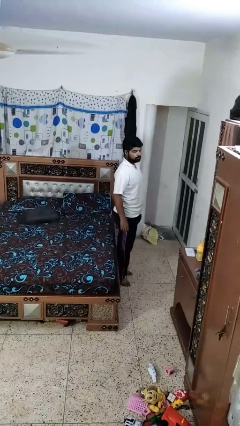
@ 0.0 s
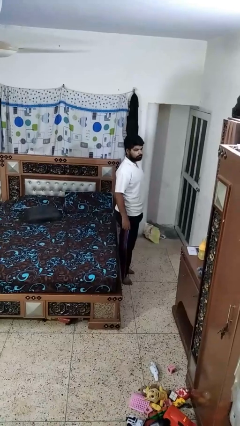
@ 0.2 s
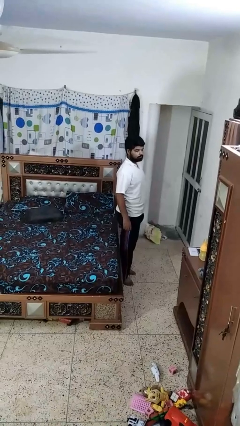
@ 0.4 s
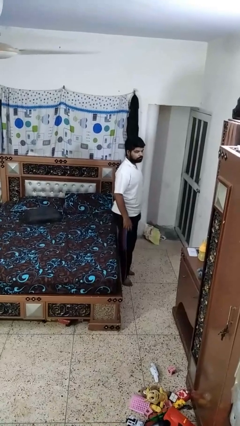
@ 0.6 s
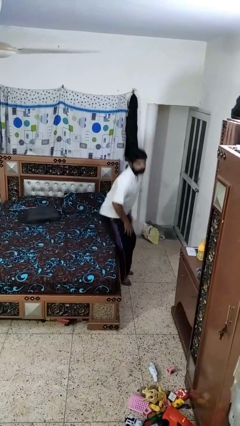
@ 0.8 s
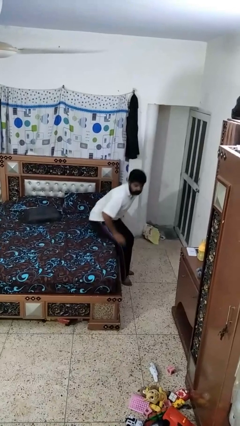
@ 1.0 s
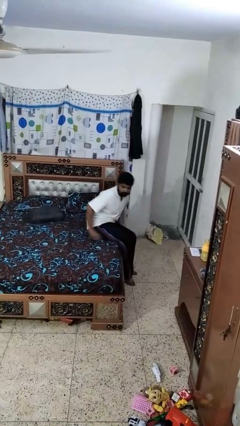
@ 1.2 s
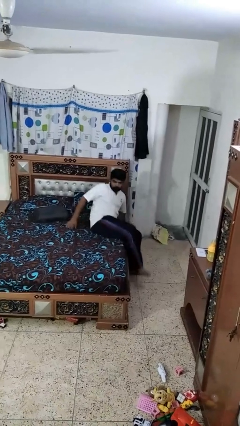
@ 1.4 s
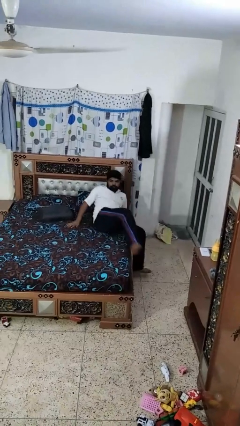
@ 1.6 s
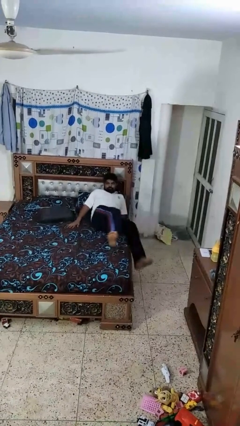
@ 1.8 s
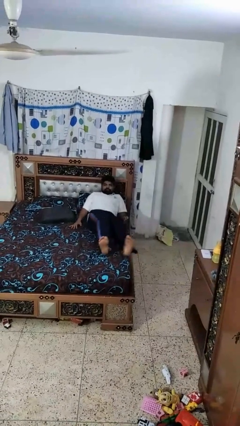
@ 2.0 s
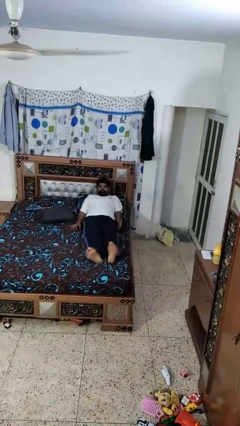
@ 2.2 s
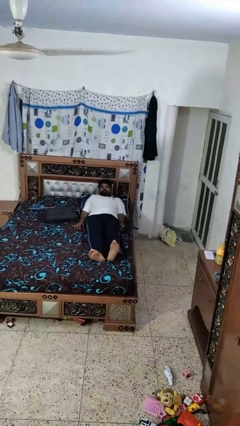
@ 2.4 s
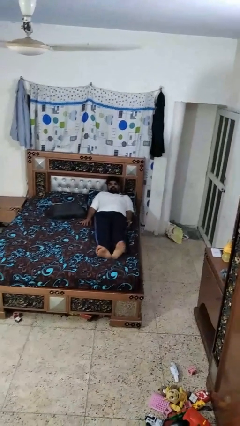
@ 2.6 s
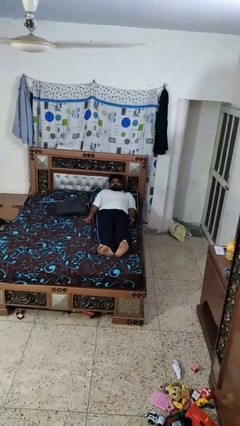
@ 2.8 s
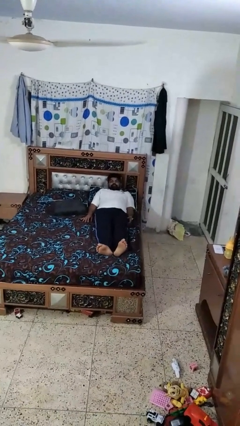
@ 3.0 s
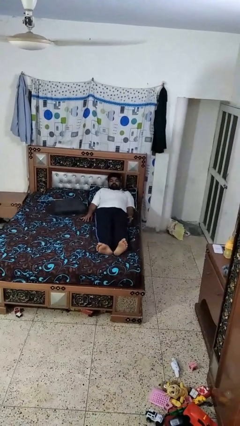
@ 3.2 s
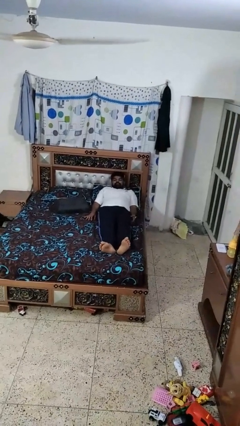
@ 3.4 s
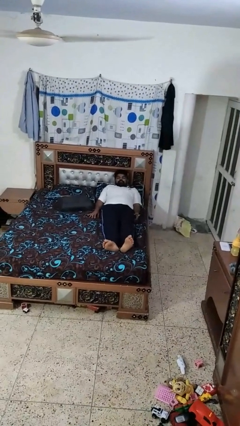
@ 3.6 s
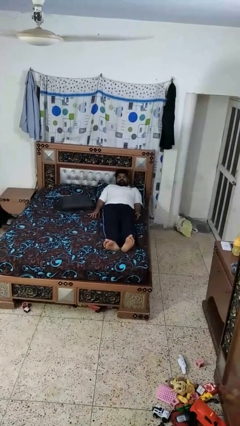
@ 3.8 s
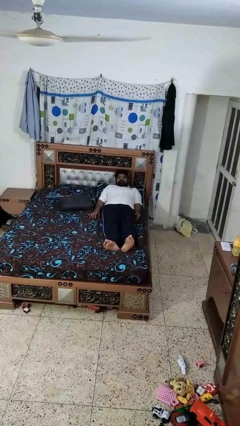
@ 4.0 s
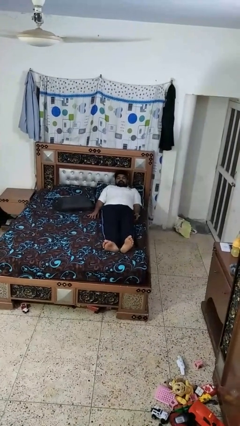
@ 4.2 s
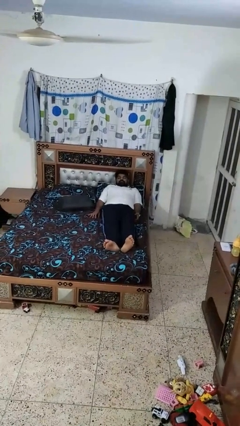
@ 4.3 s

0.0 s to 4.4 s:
person lies down on bed

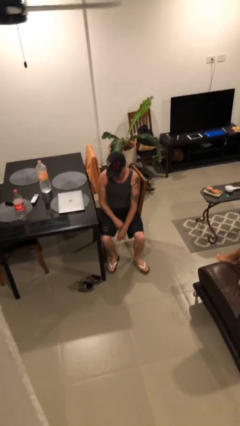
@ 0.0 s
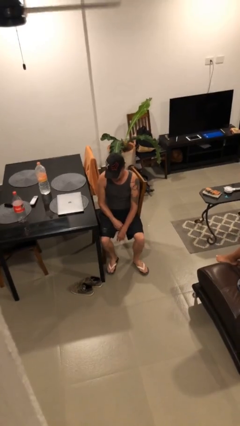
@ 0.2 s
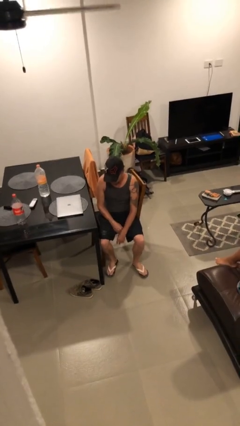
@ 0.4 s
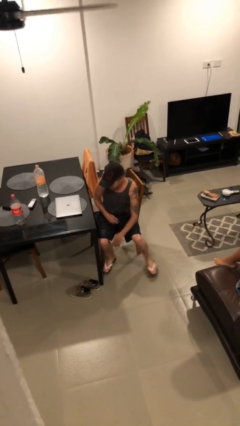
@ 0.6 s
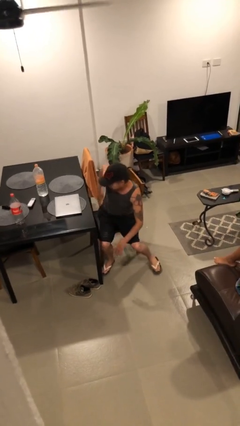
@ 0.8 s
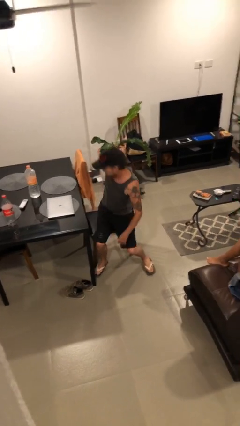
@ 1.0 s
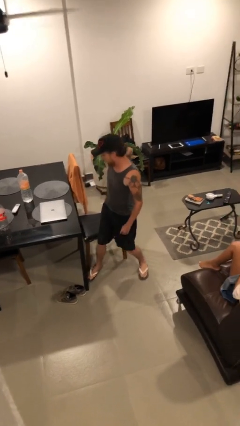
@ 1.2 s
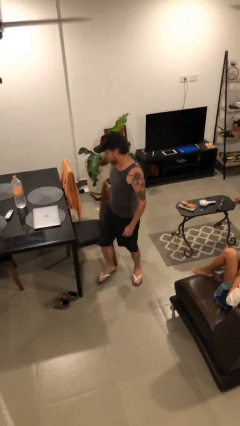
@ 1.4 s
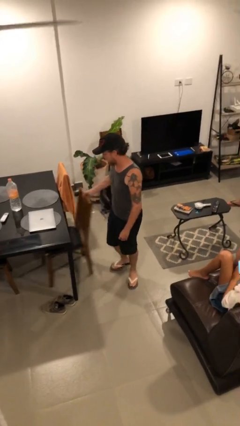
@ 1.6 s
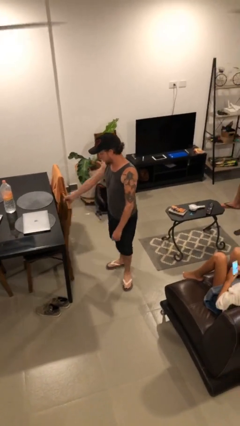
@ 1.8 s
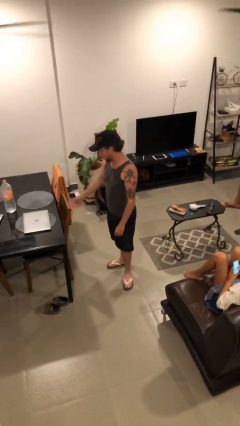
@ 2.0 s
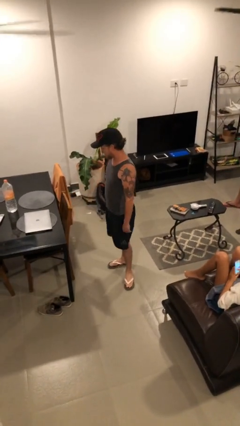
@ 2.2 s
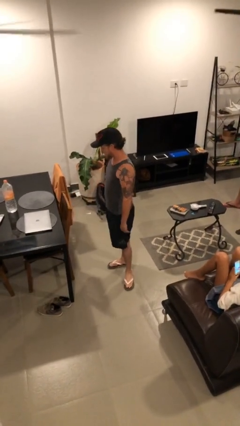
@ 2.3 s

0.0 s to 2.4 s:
person stands up

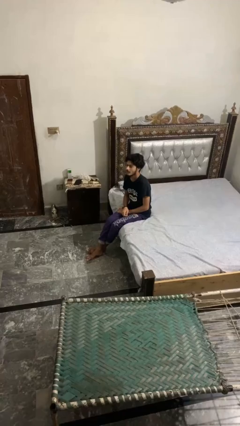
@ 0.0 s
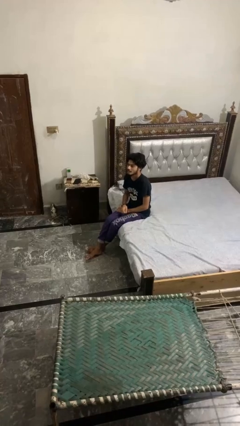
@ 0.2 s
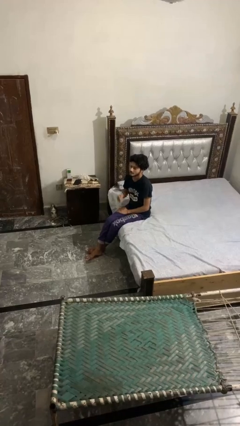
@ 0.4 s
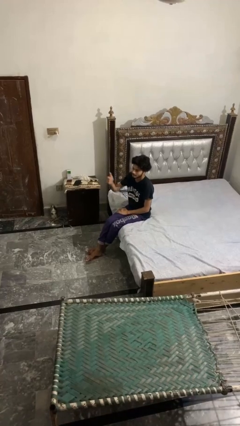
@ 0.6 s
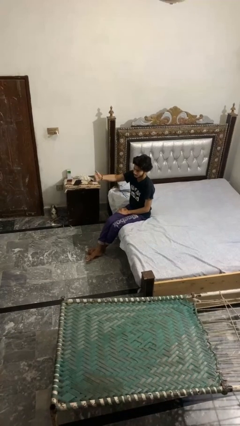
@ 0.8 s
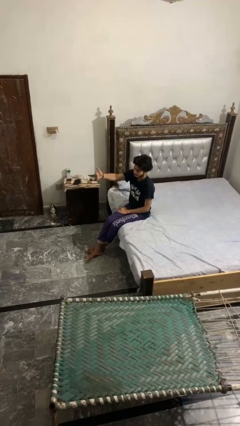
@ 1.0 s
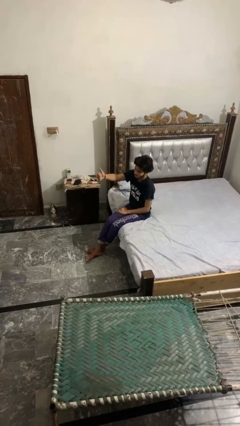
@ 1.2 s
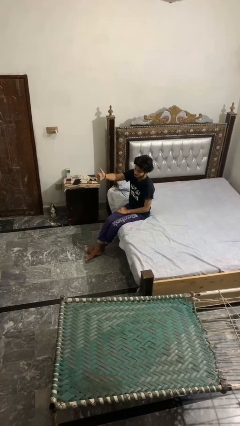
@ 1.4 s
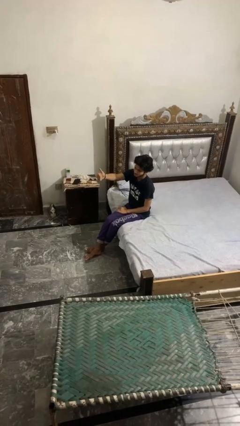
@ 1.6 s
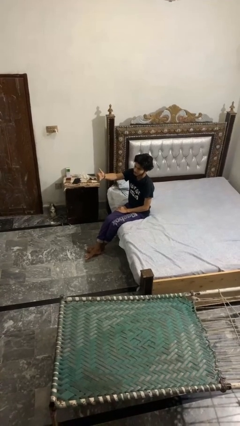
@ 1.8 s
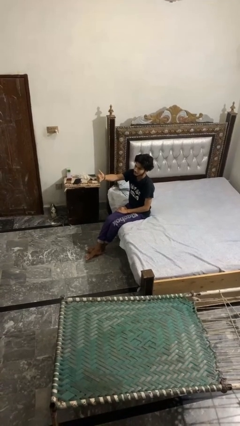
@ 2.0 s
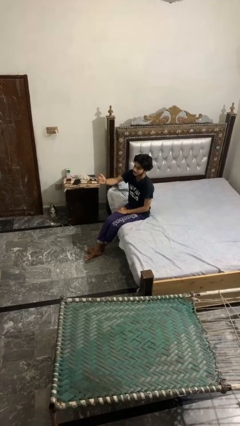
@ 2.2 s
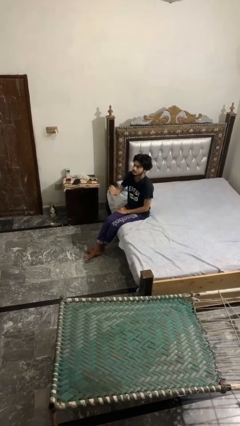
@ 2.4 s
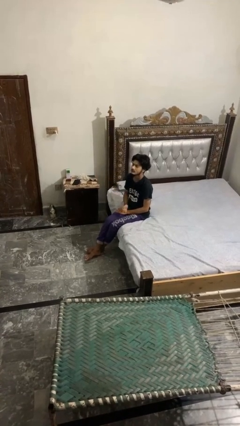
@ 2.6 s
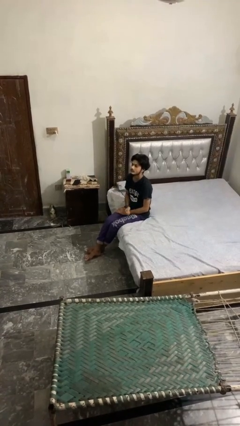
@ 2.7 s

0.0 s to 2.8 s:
person gestures thumbs up

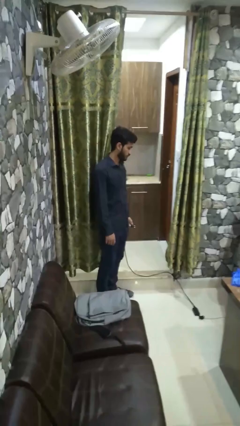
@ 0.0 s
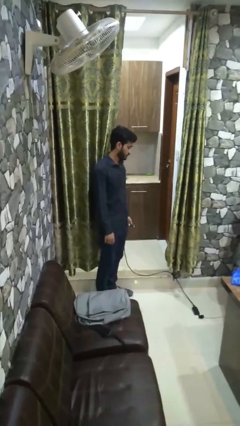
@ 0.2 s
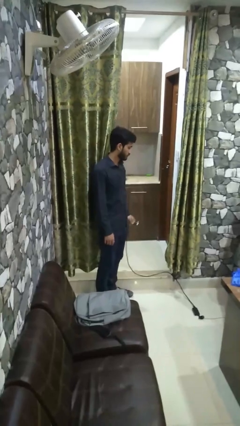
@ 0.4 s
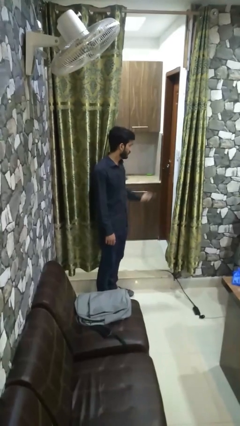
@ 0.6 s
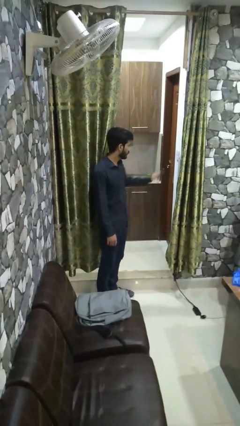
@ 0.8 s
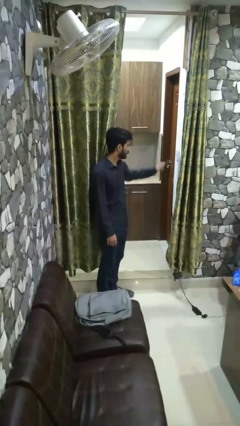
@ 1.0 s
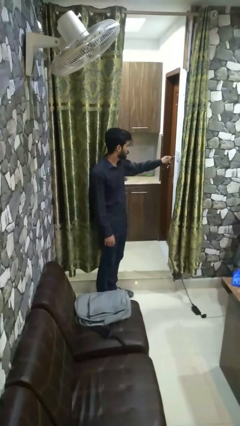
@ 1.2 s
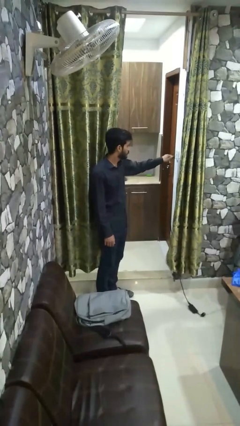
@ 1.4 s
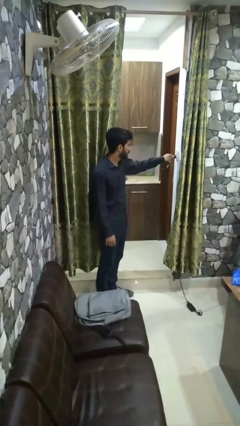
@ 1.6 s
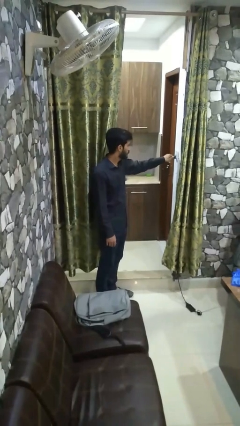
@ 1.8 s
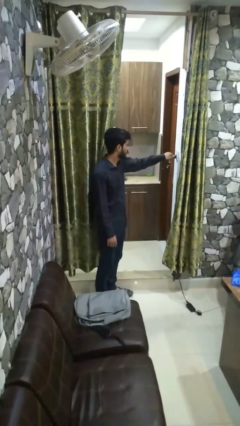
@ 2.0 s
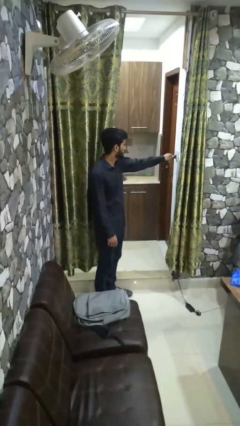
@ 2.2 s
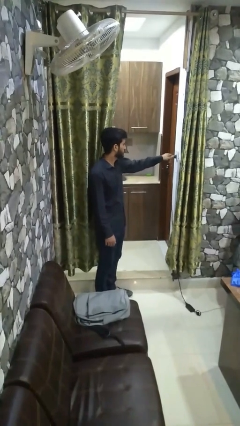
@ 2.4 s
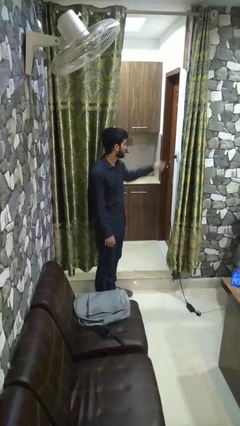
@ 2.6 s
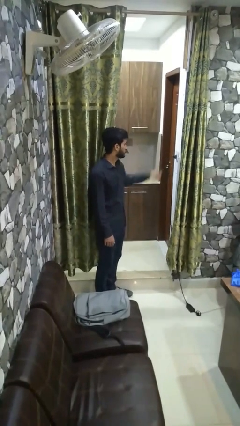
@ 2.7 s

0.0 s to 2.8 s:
person plugs into electrical socket

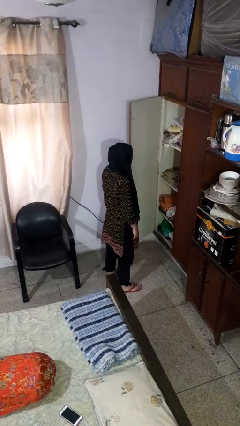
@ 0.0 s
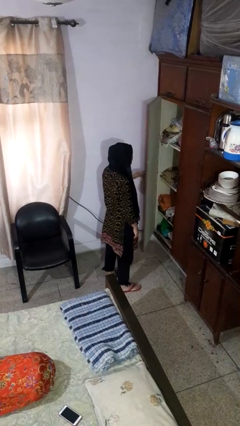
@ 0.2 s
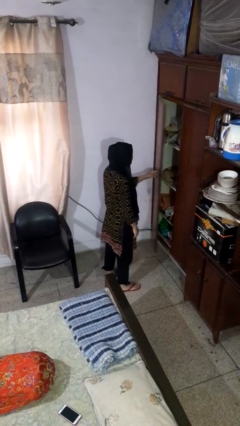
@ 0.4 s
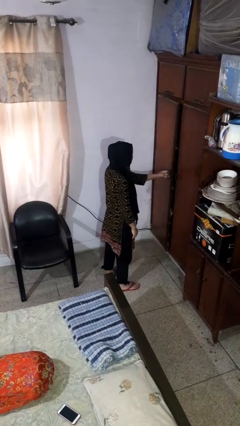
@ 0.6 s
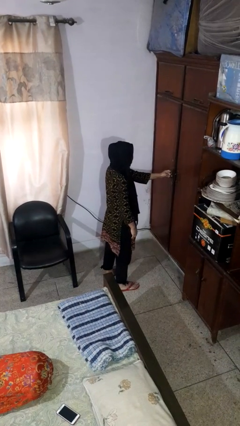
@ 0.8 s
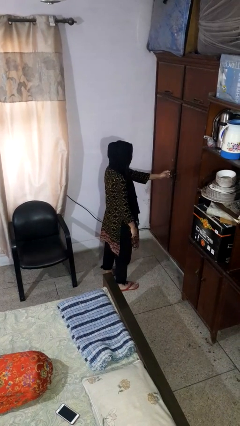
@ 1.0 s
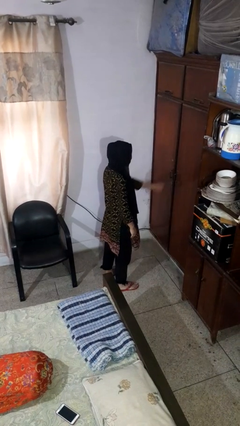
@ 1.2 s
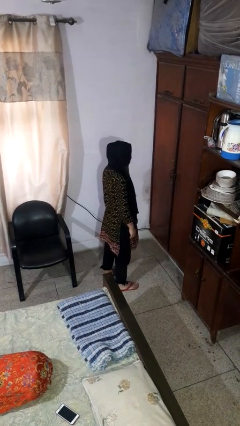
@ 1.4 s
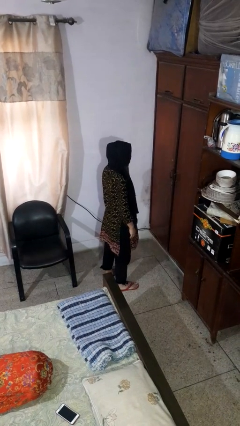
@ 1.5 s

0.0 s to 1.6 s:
person closes closet door

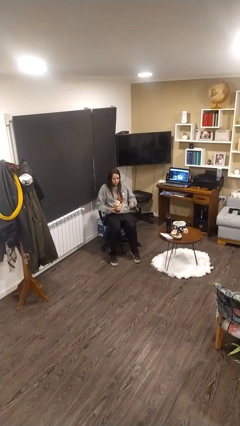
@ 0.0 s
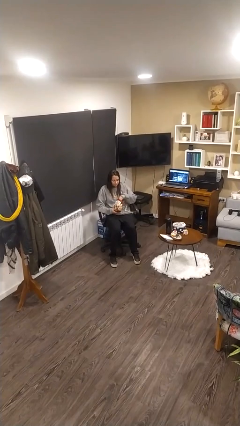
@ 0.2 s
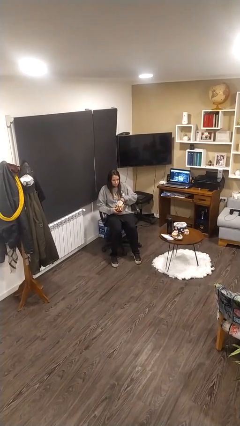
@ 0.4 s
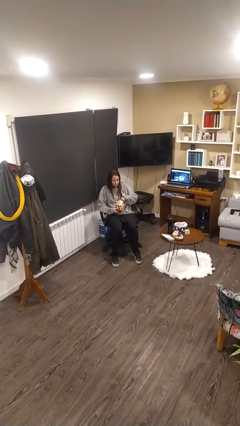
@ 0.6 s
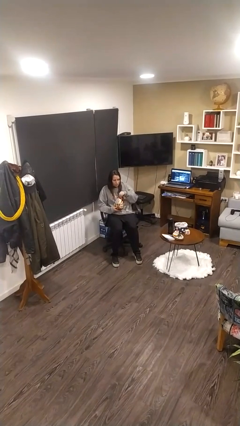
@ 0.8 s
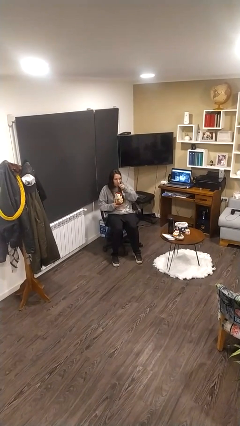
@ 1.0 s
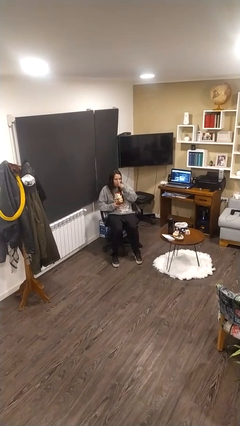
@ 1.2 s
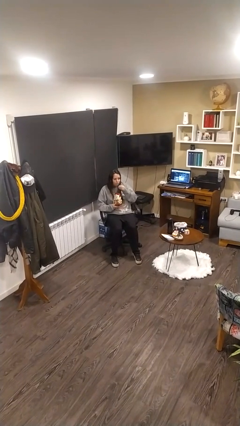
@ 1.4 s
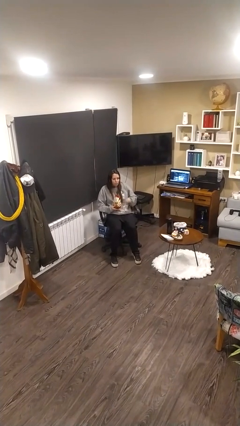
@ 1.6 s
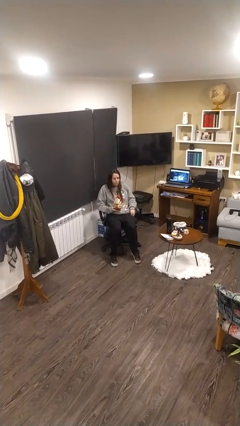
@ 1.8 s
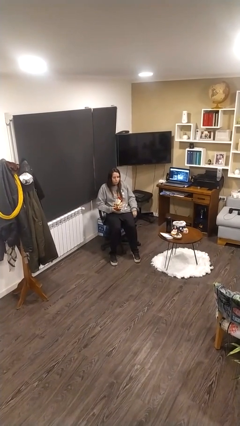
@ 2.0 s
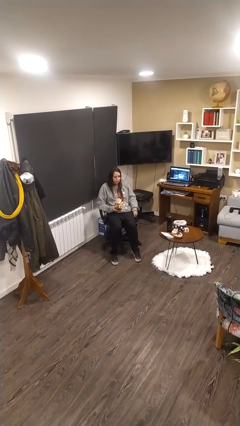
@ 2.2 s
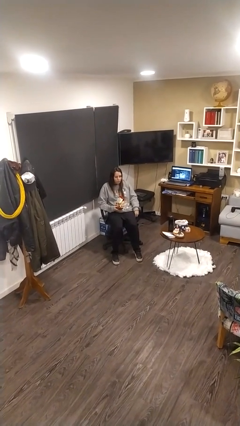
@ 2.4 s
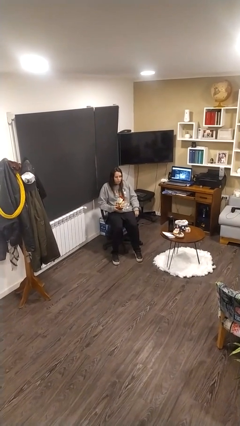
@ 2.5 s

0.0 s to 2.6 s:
person eats snack from bag
